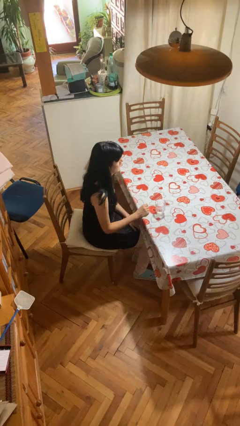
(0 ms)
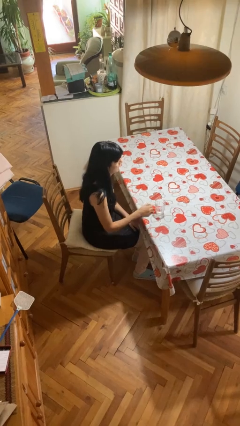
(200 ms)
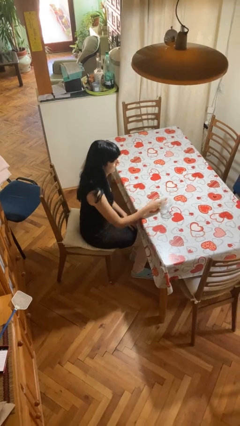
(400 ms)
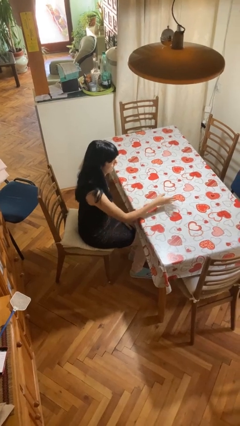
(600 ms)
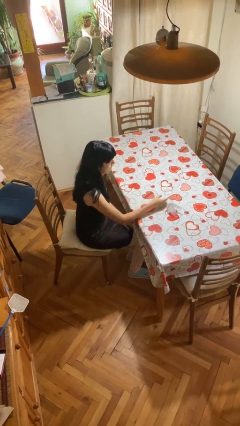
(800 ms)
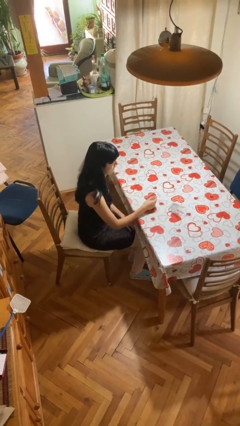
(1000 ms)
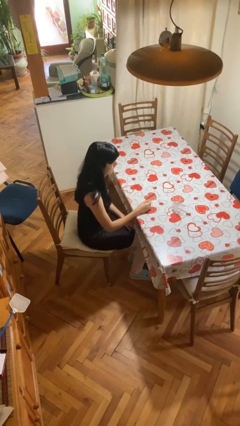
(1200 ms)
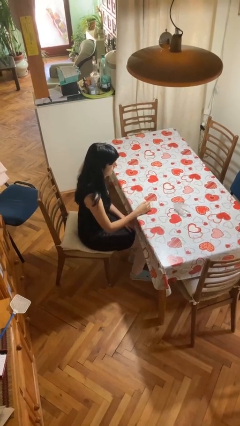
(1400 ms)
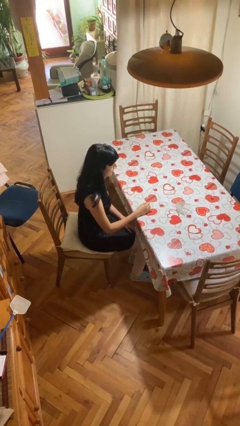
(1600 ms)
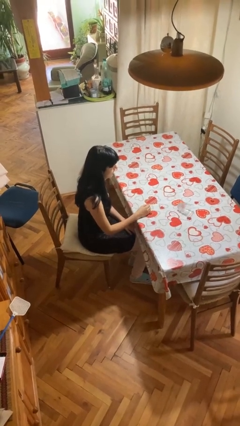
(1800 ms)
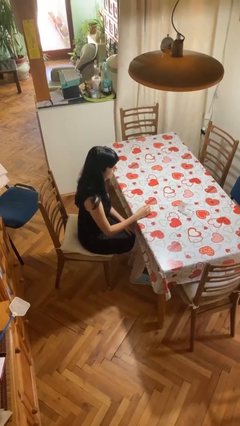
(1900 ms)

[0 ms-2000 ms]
person knocks over glass

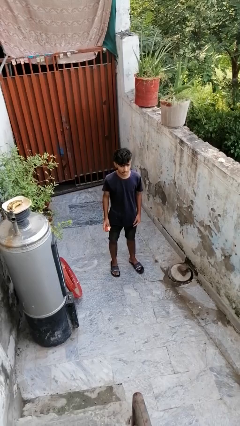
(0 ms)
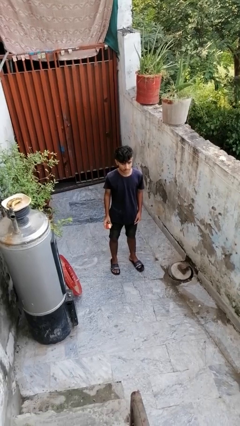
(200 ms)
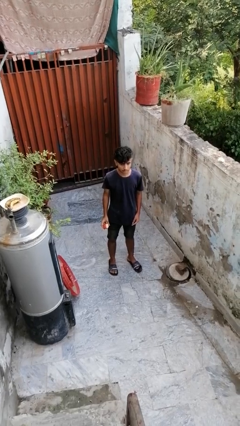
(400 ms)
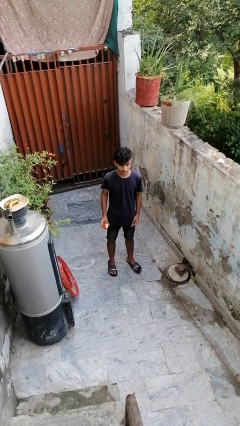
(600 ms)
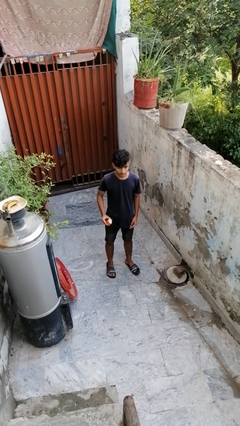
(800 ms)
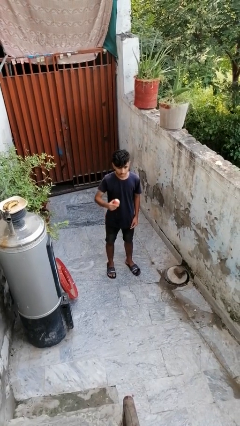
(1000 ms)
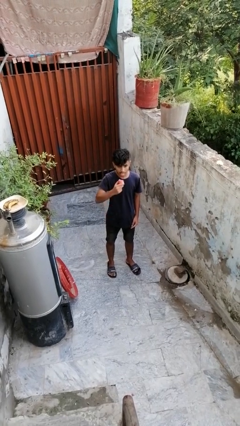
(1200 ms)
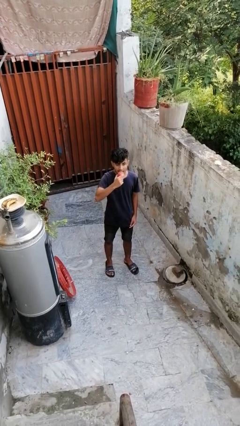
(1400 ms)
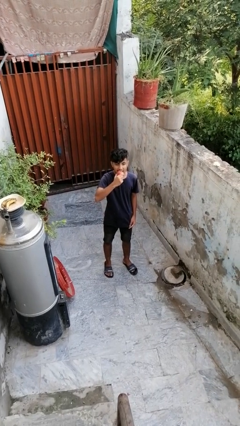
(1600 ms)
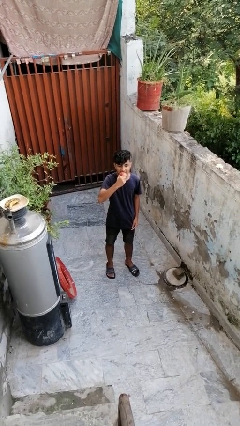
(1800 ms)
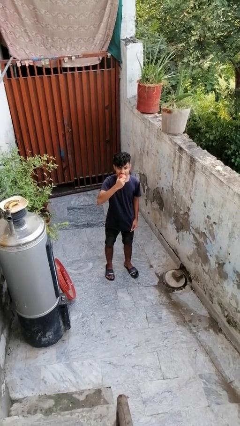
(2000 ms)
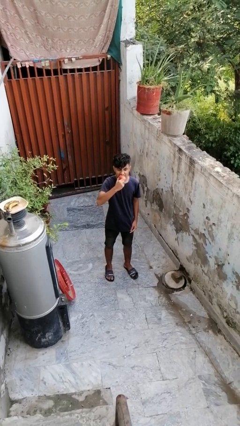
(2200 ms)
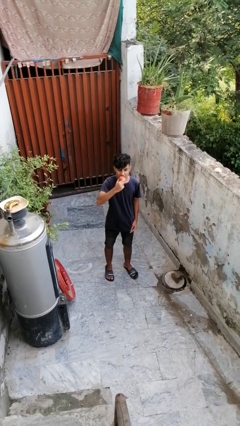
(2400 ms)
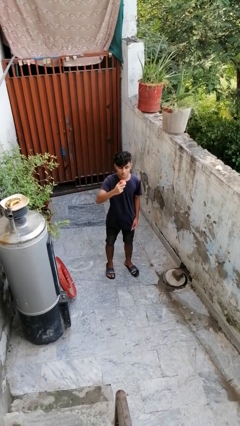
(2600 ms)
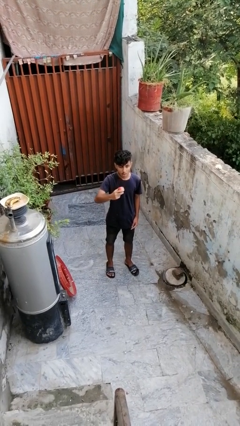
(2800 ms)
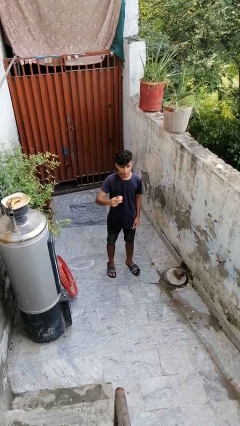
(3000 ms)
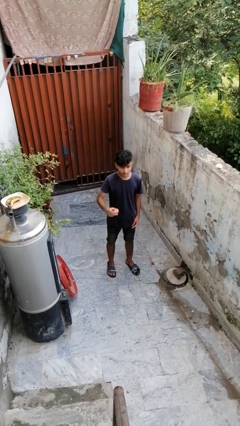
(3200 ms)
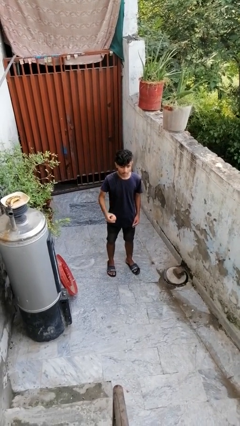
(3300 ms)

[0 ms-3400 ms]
person eats apple

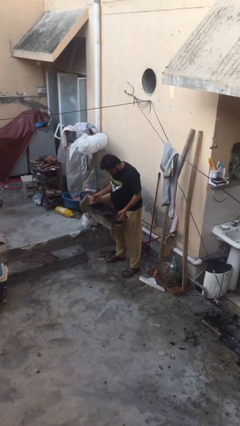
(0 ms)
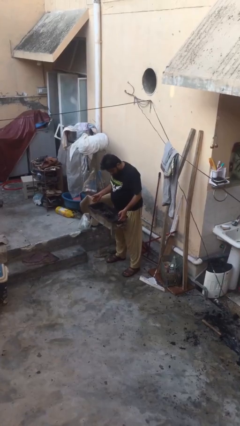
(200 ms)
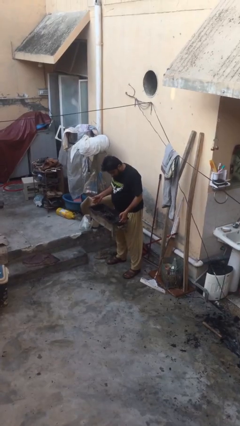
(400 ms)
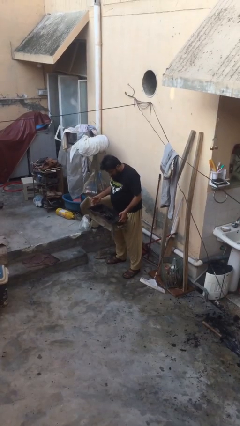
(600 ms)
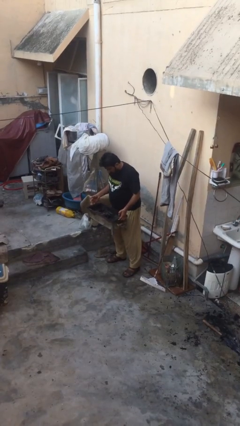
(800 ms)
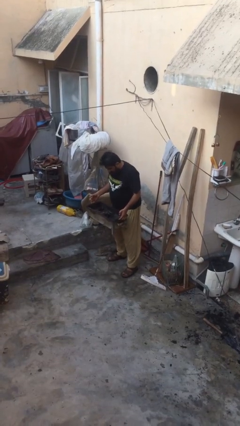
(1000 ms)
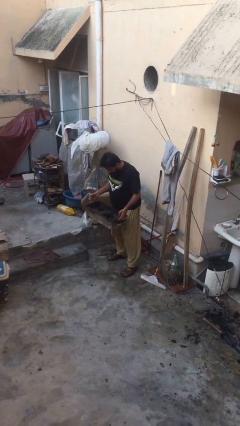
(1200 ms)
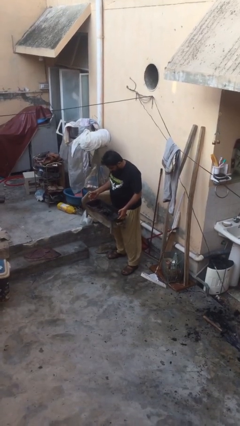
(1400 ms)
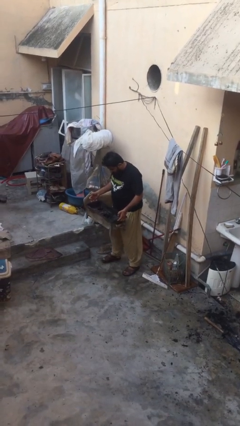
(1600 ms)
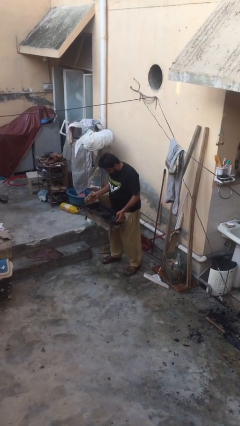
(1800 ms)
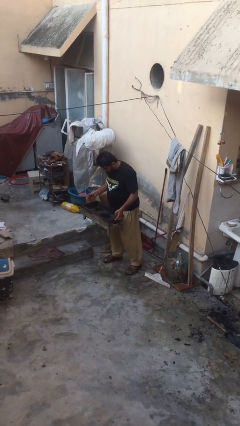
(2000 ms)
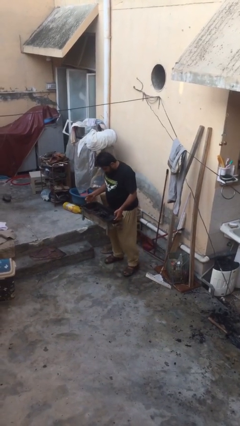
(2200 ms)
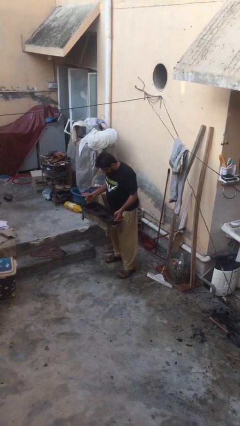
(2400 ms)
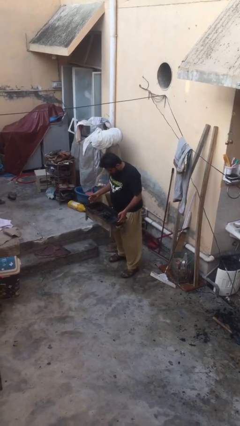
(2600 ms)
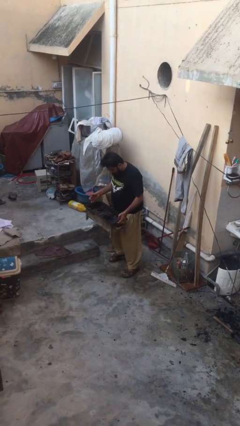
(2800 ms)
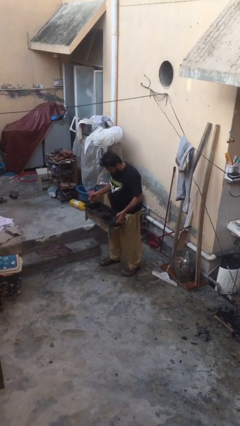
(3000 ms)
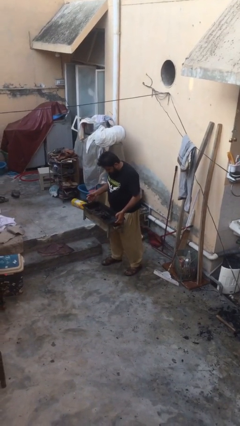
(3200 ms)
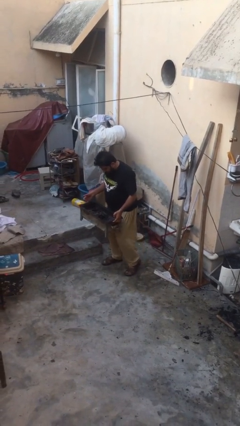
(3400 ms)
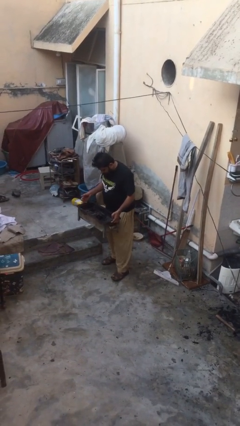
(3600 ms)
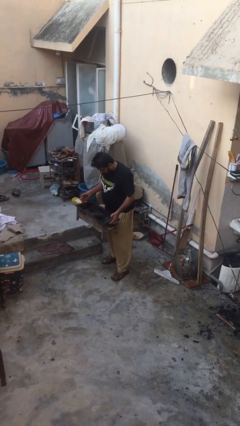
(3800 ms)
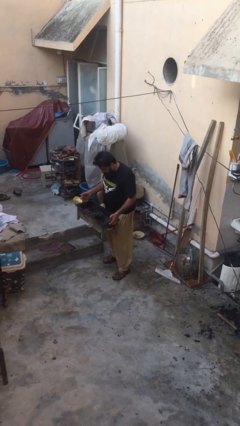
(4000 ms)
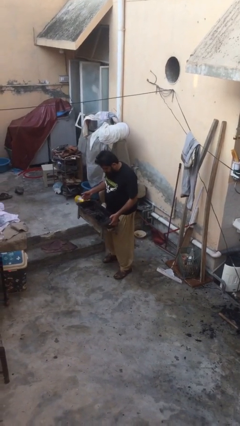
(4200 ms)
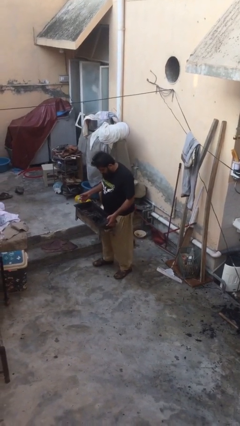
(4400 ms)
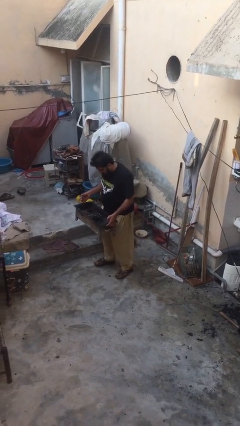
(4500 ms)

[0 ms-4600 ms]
person carries heavy object

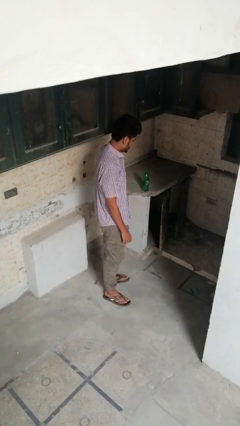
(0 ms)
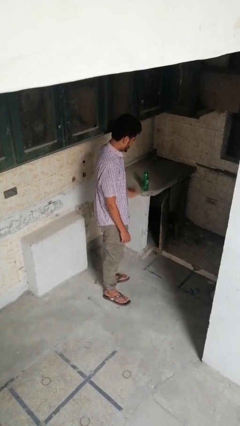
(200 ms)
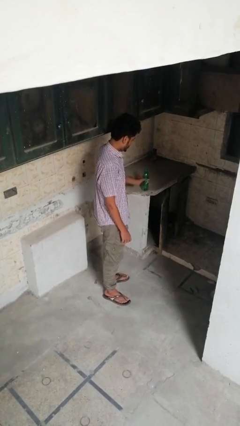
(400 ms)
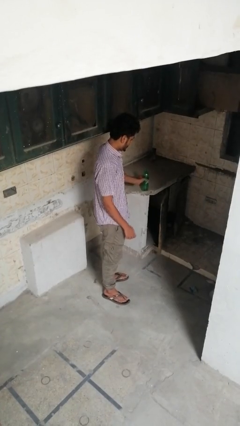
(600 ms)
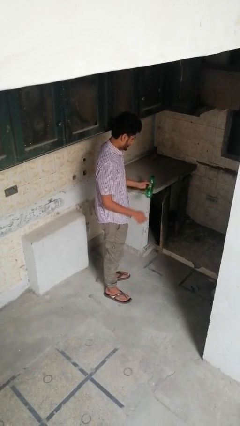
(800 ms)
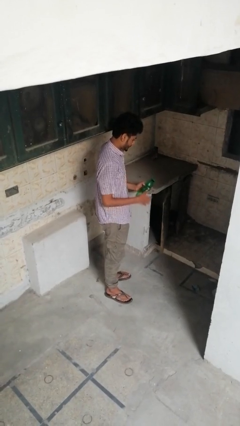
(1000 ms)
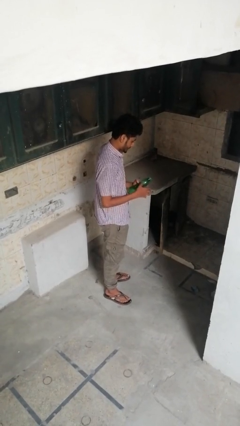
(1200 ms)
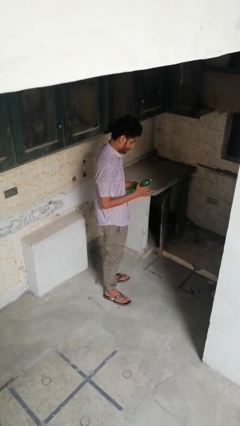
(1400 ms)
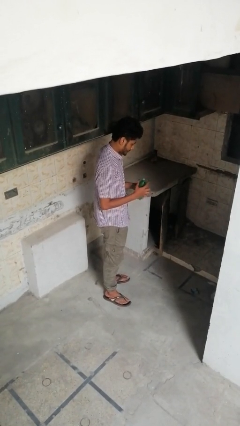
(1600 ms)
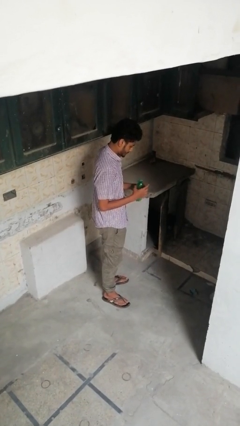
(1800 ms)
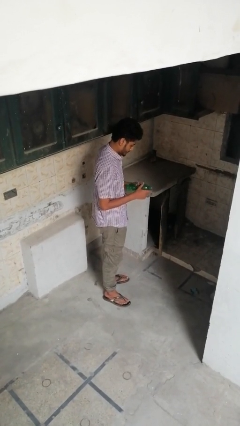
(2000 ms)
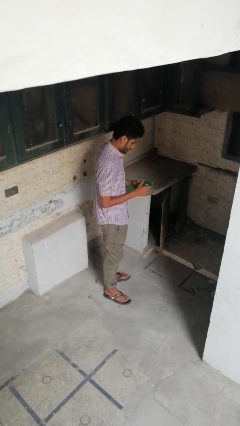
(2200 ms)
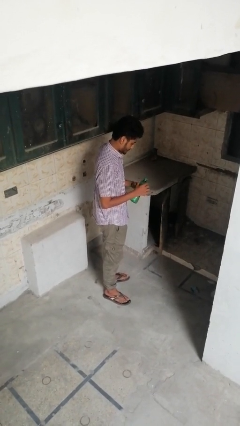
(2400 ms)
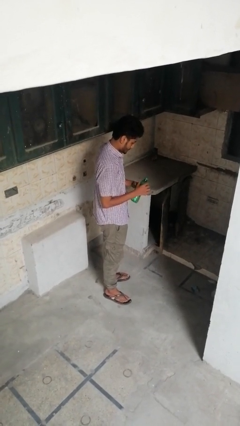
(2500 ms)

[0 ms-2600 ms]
person picks up object from countertop

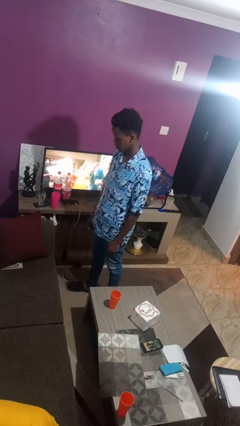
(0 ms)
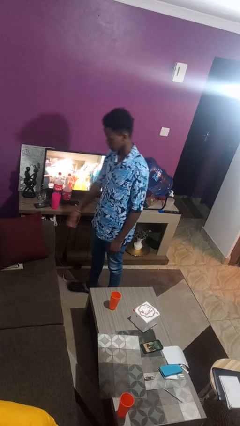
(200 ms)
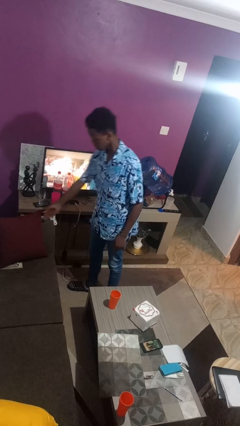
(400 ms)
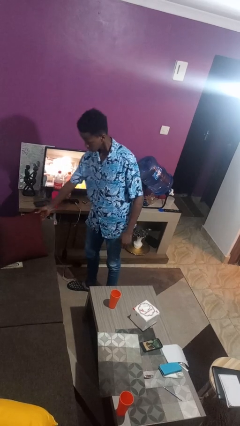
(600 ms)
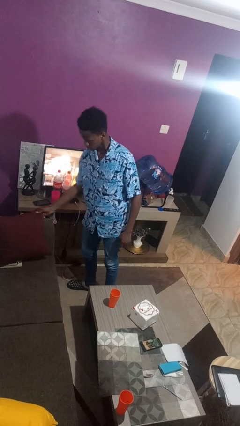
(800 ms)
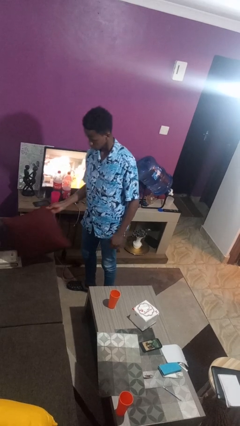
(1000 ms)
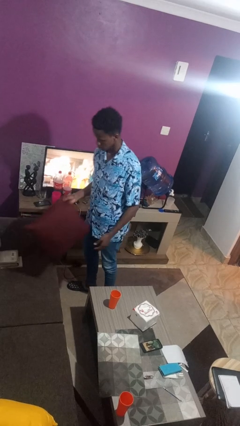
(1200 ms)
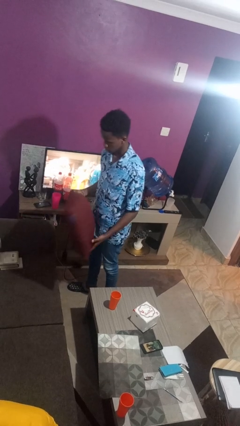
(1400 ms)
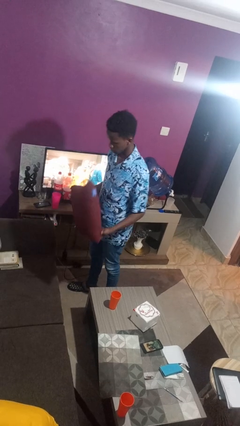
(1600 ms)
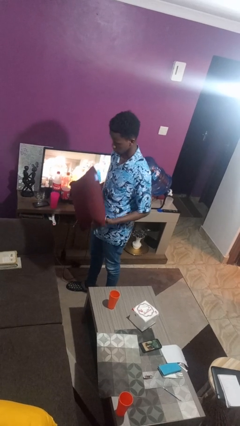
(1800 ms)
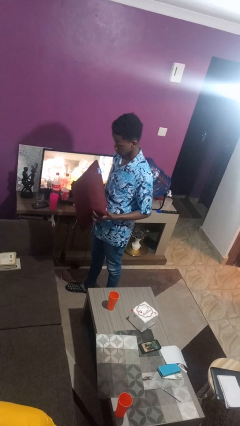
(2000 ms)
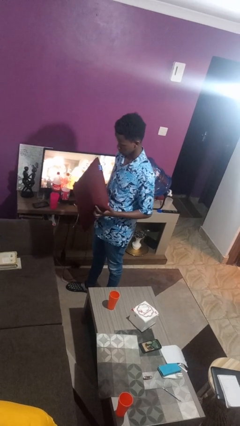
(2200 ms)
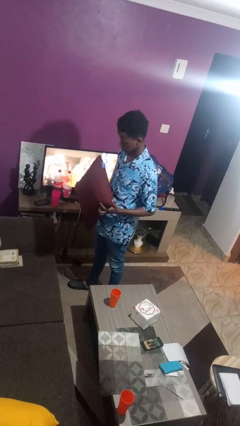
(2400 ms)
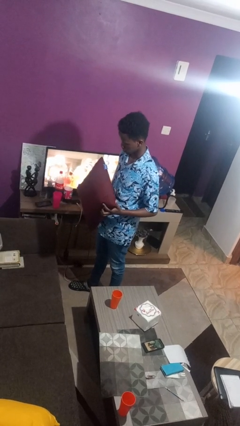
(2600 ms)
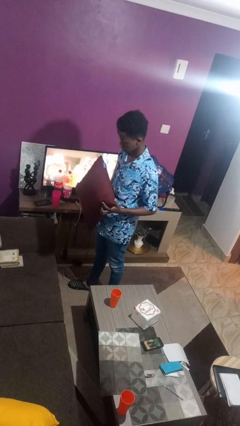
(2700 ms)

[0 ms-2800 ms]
person picks up object from couch

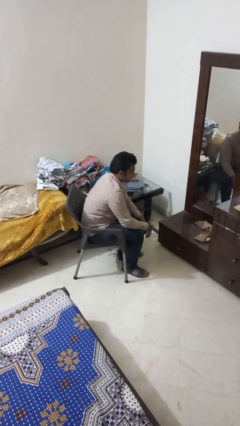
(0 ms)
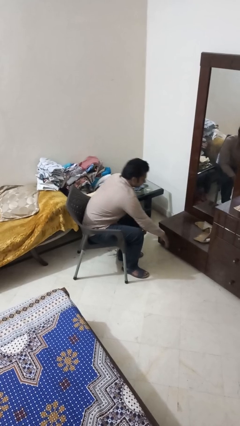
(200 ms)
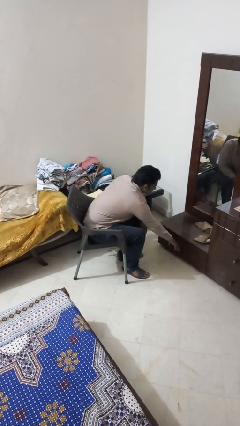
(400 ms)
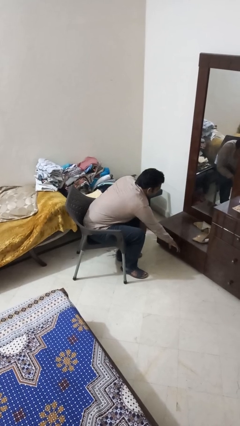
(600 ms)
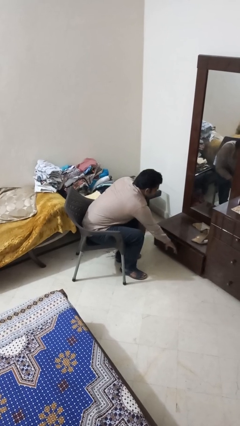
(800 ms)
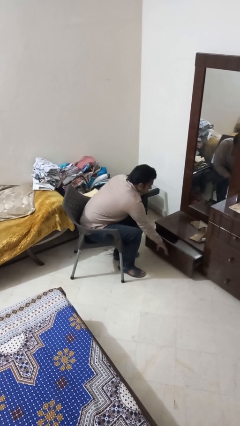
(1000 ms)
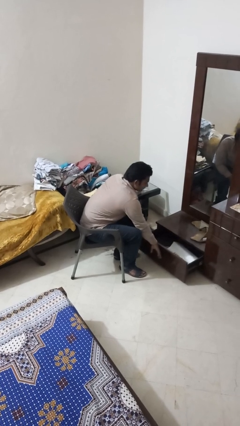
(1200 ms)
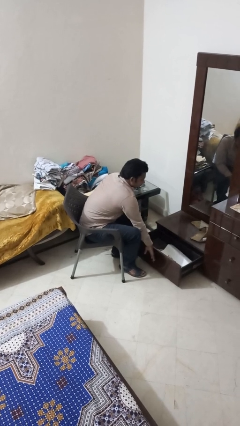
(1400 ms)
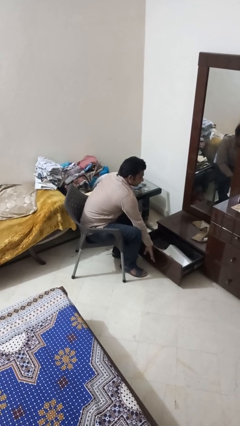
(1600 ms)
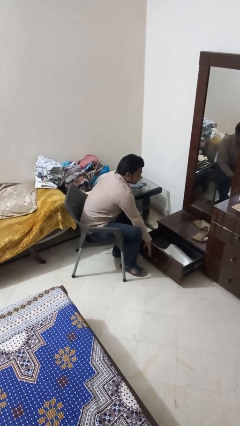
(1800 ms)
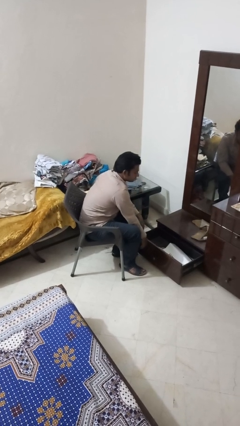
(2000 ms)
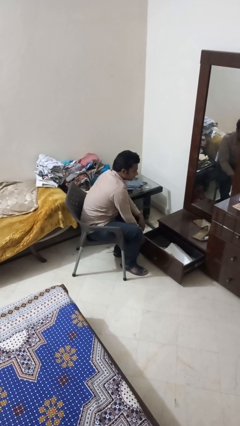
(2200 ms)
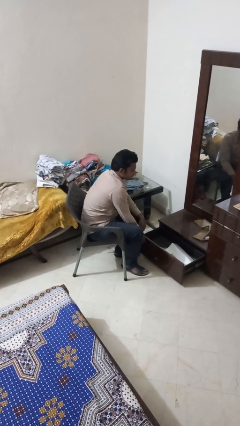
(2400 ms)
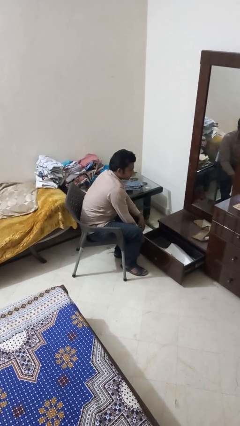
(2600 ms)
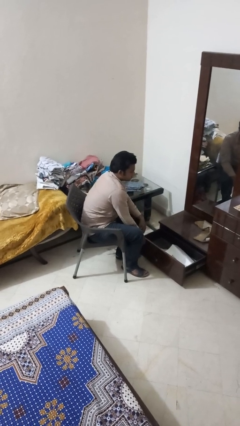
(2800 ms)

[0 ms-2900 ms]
person opens dresser drawer
